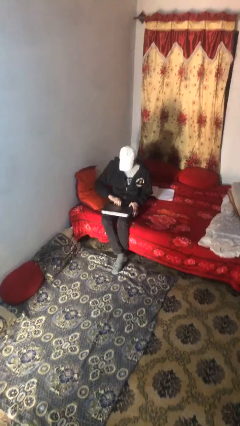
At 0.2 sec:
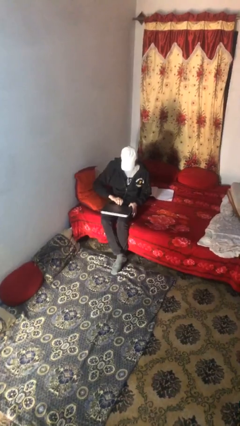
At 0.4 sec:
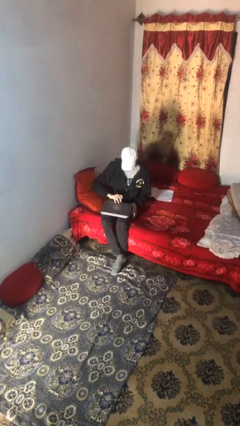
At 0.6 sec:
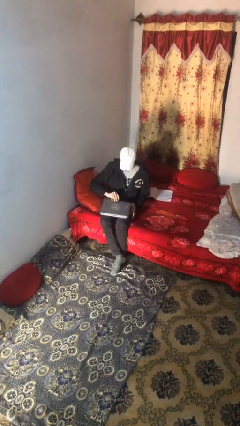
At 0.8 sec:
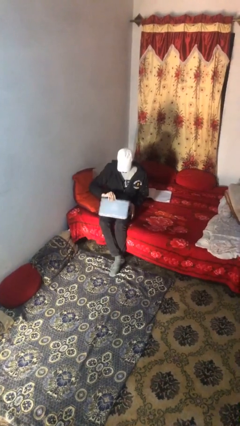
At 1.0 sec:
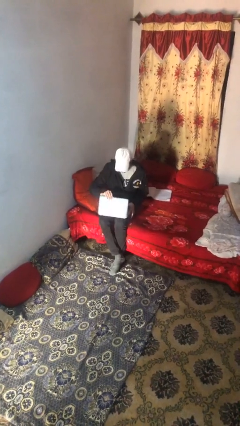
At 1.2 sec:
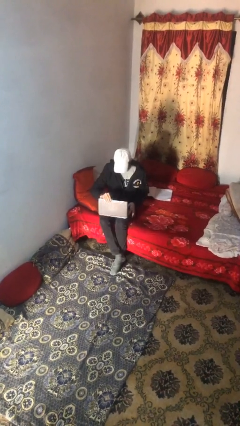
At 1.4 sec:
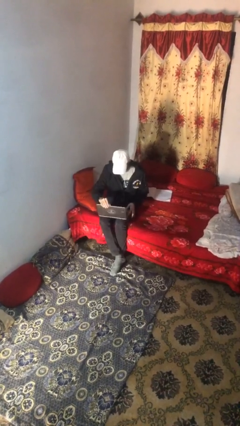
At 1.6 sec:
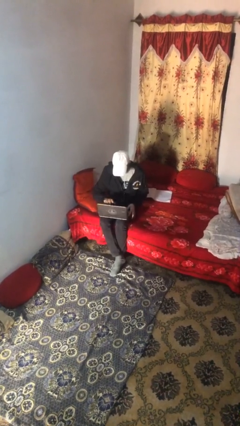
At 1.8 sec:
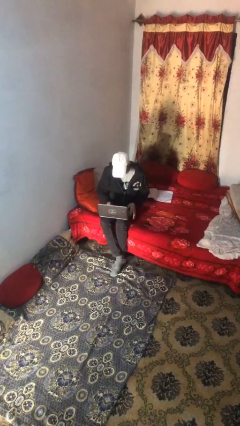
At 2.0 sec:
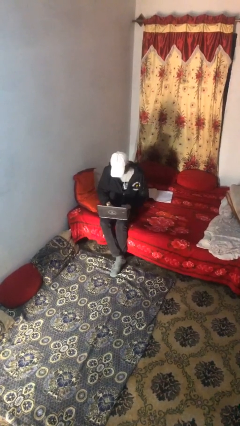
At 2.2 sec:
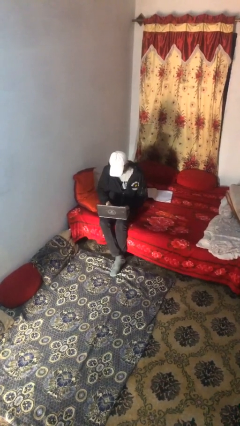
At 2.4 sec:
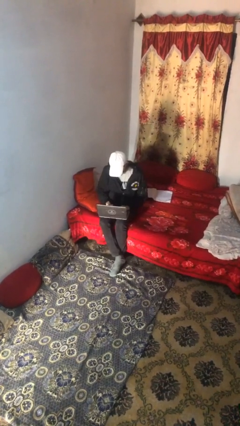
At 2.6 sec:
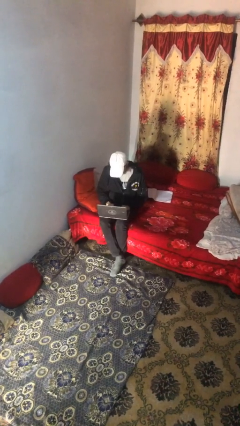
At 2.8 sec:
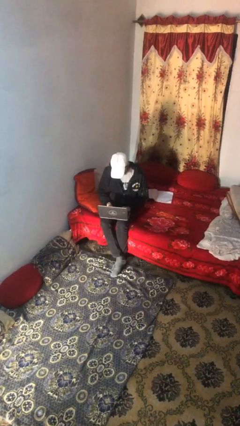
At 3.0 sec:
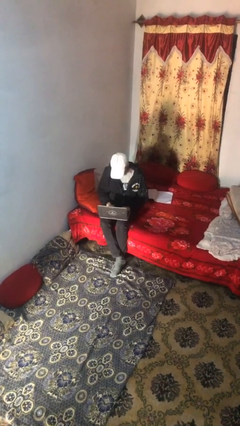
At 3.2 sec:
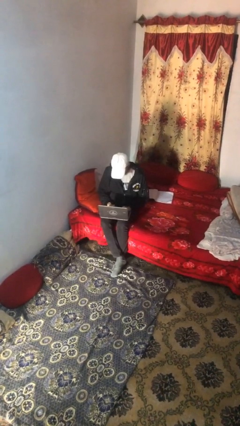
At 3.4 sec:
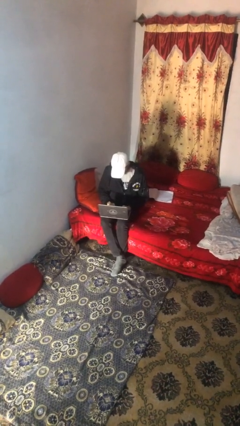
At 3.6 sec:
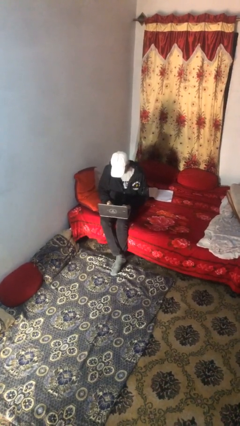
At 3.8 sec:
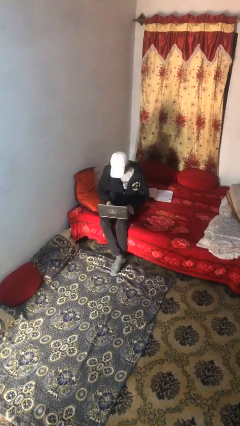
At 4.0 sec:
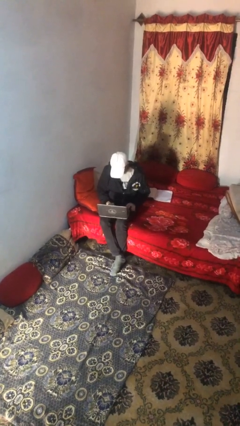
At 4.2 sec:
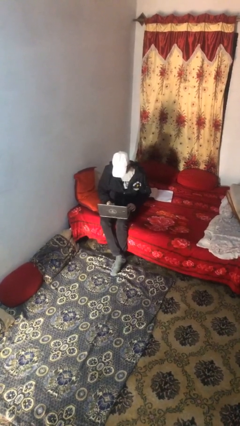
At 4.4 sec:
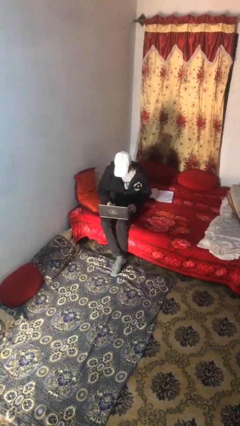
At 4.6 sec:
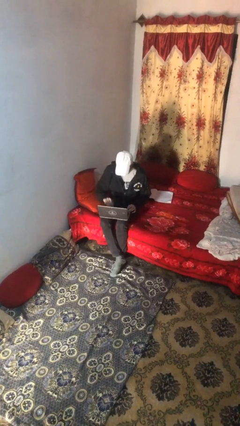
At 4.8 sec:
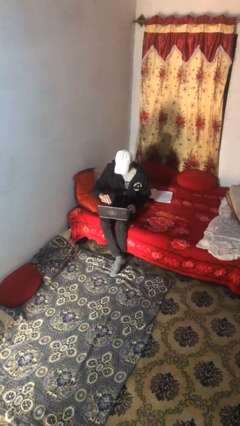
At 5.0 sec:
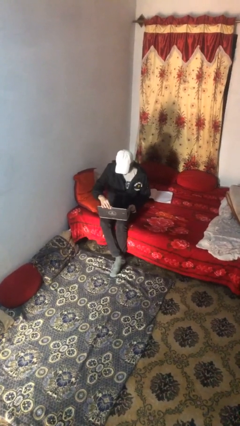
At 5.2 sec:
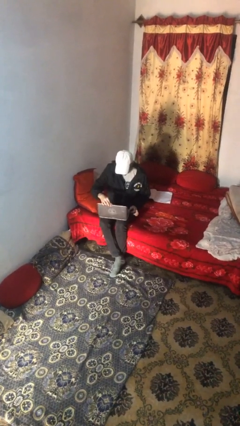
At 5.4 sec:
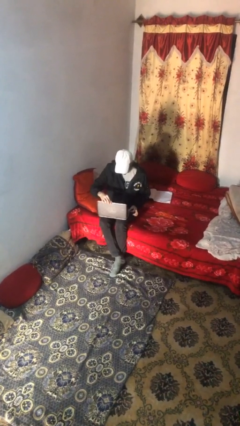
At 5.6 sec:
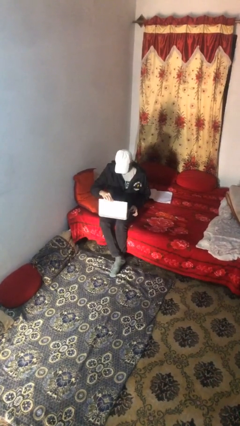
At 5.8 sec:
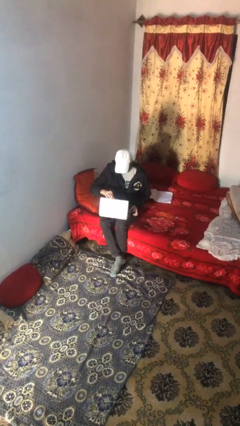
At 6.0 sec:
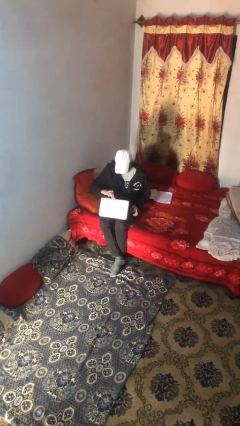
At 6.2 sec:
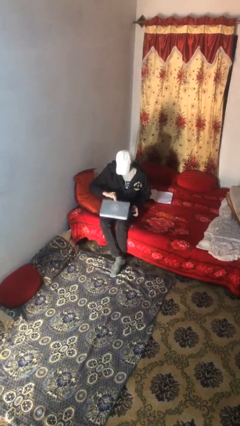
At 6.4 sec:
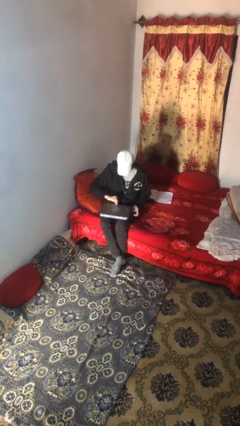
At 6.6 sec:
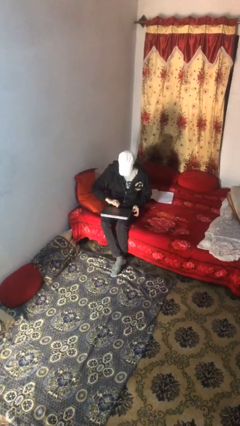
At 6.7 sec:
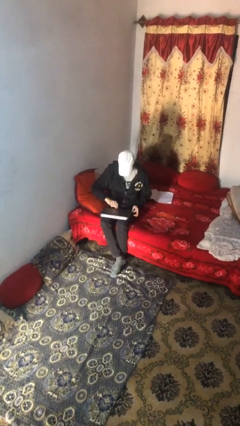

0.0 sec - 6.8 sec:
person interacts with laptop

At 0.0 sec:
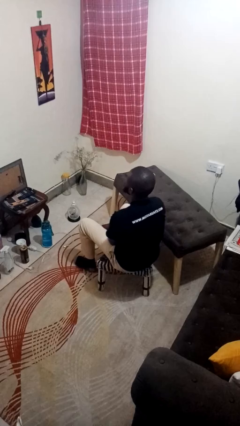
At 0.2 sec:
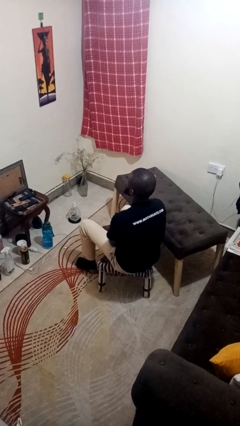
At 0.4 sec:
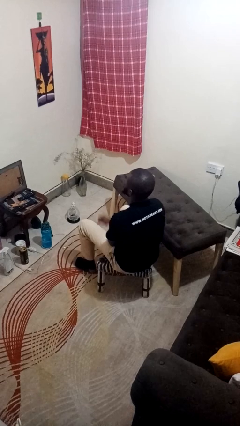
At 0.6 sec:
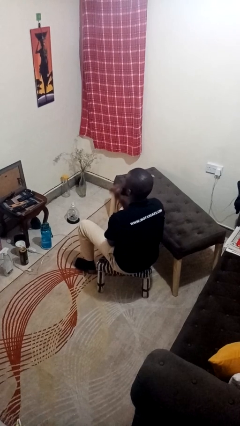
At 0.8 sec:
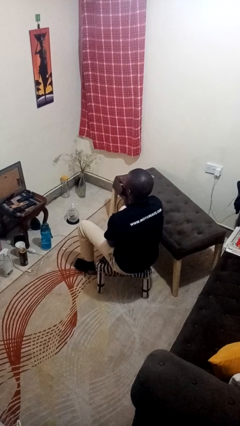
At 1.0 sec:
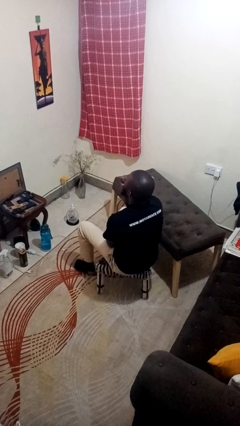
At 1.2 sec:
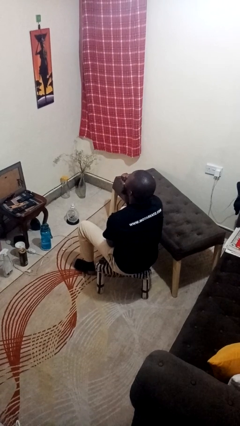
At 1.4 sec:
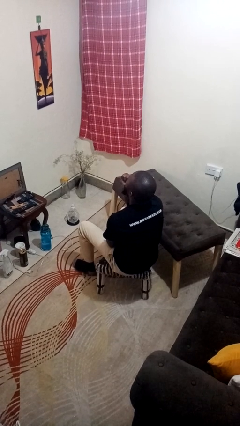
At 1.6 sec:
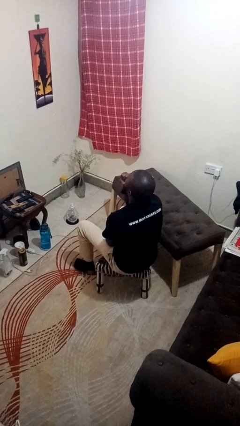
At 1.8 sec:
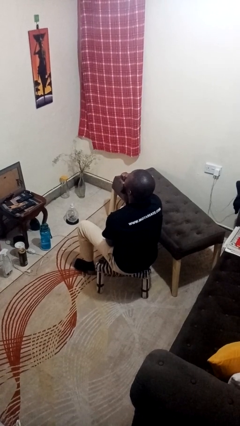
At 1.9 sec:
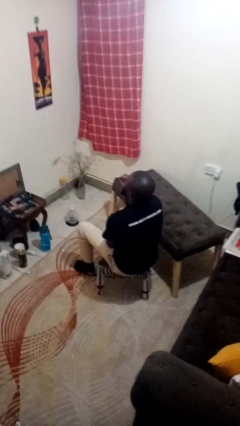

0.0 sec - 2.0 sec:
person yawns

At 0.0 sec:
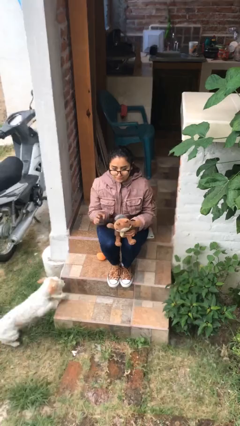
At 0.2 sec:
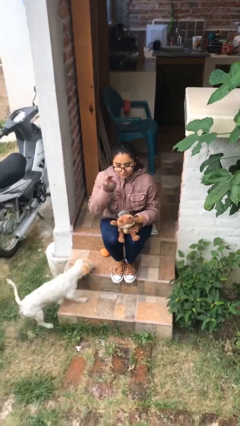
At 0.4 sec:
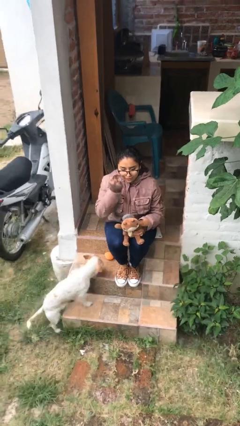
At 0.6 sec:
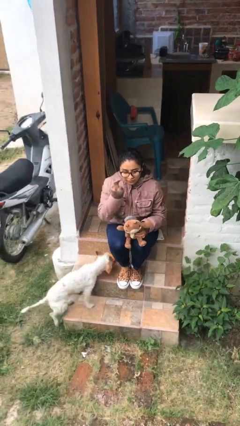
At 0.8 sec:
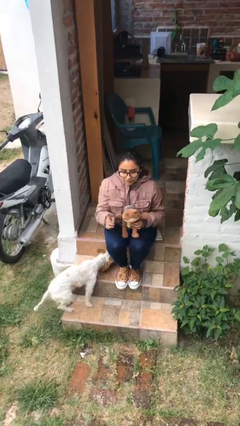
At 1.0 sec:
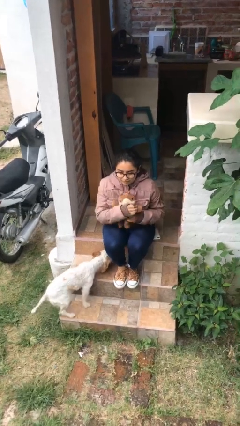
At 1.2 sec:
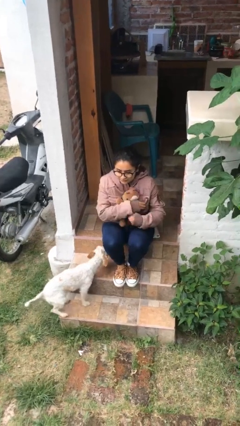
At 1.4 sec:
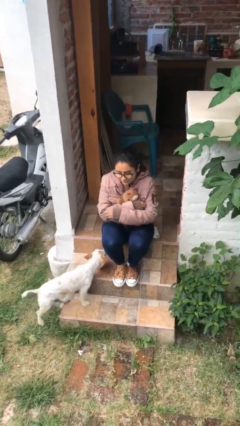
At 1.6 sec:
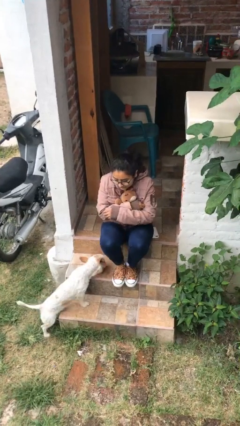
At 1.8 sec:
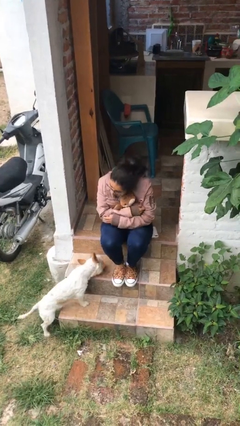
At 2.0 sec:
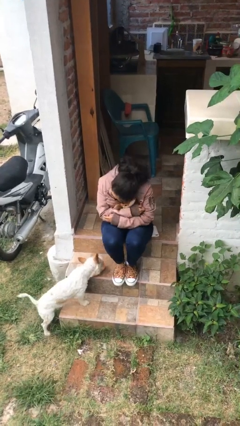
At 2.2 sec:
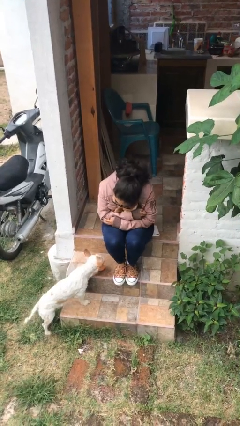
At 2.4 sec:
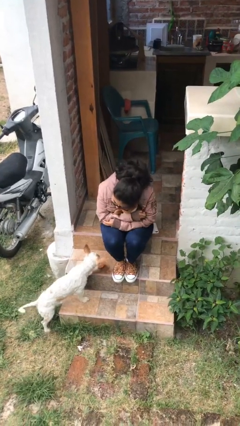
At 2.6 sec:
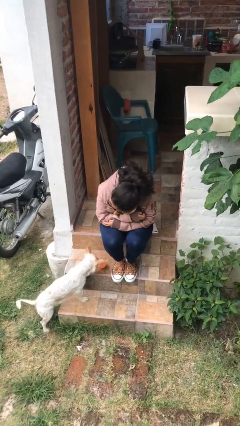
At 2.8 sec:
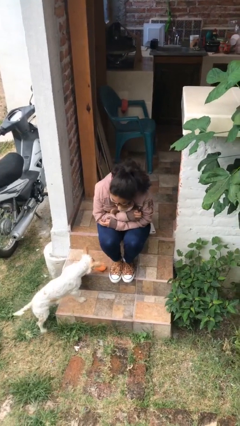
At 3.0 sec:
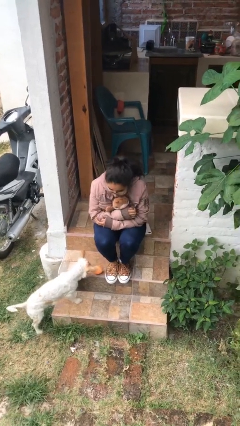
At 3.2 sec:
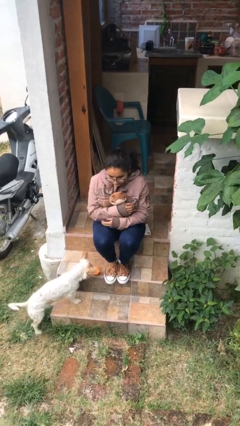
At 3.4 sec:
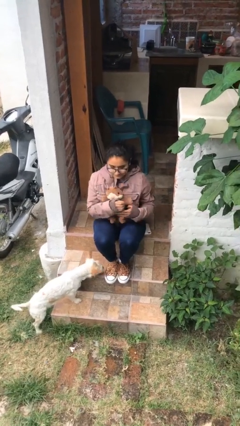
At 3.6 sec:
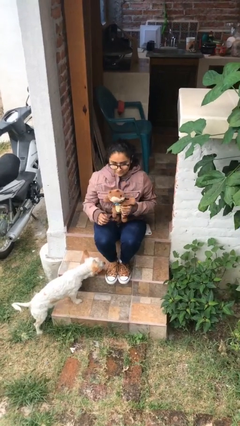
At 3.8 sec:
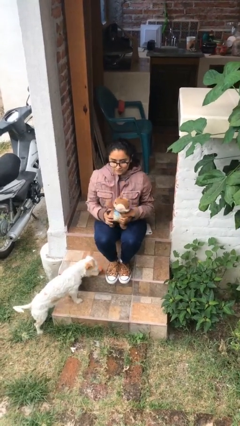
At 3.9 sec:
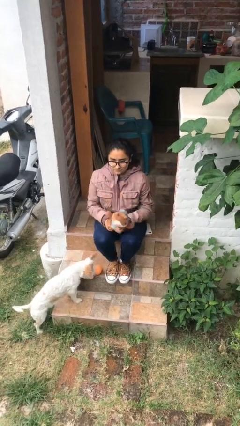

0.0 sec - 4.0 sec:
person hugs stuffed animal

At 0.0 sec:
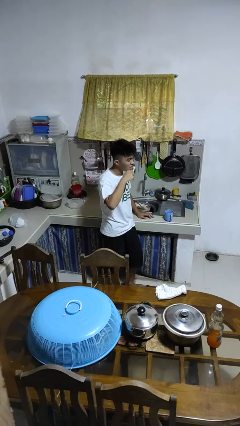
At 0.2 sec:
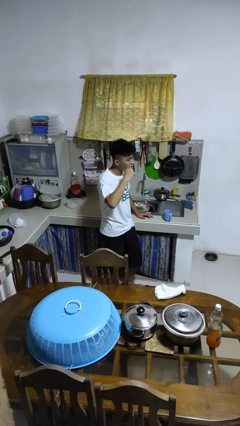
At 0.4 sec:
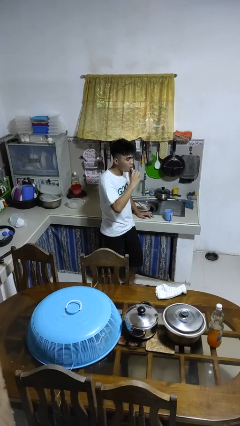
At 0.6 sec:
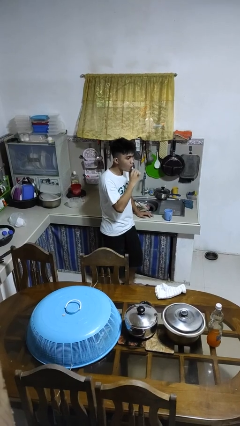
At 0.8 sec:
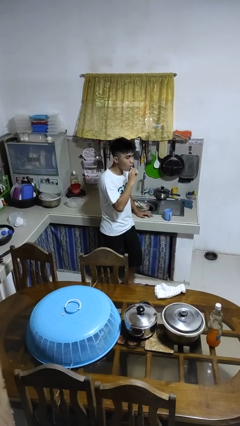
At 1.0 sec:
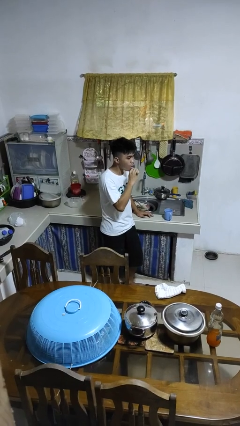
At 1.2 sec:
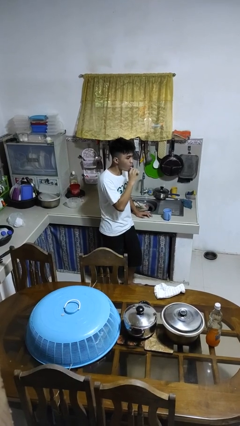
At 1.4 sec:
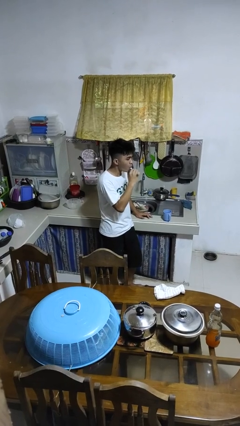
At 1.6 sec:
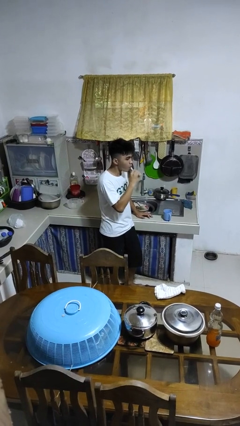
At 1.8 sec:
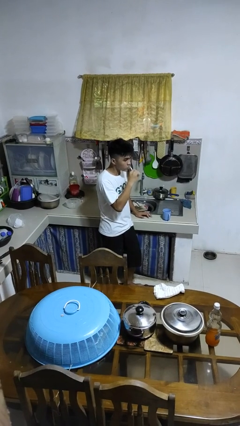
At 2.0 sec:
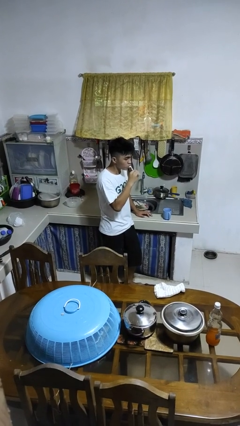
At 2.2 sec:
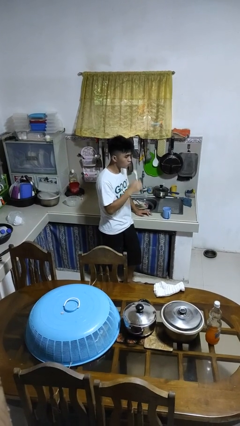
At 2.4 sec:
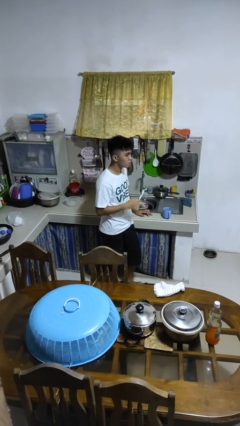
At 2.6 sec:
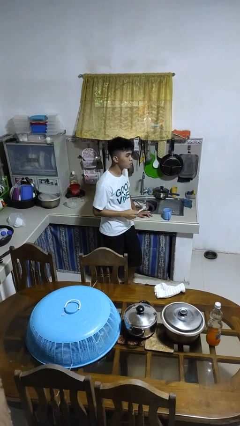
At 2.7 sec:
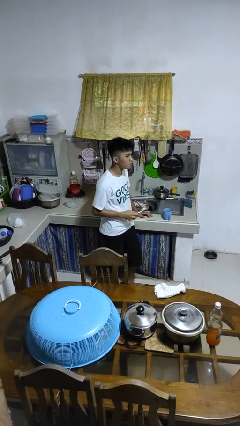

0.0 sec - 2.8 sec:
person brushes teeth

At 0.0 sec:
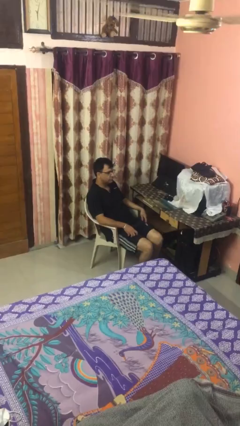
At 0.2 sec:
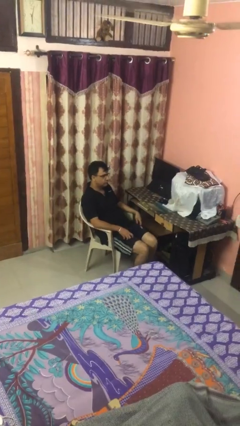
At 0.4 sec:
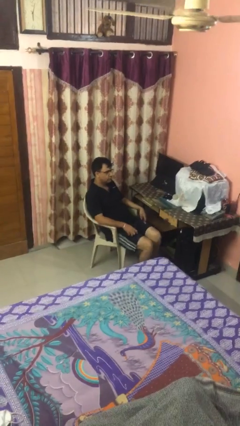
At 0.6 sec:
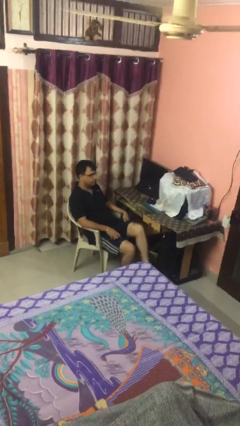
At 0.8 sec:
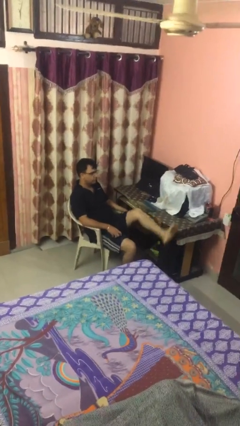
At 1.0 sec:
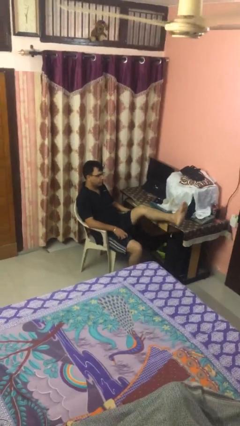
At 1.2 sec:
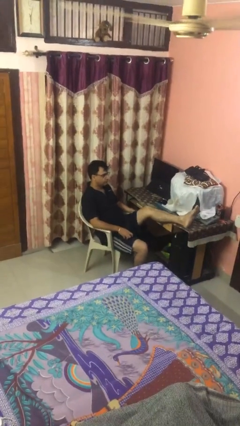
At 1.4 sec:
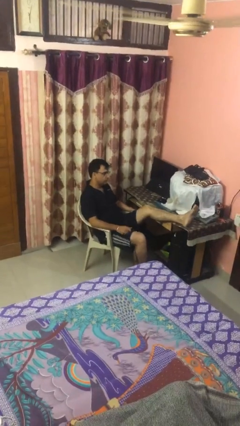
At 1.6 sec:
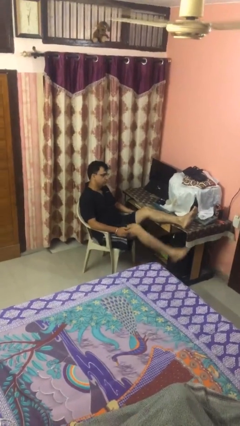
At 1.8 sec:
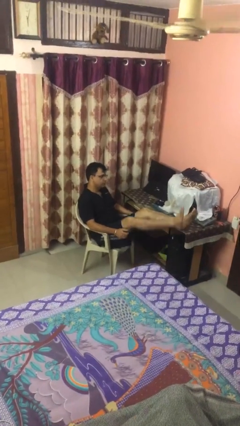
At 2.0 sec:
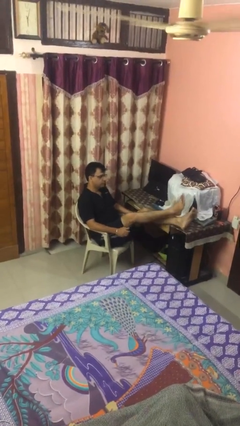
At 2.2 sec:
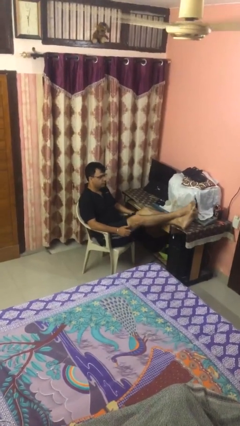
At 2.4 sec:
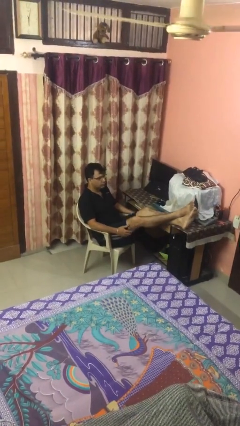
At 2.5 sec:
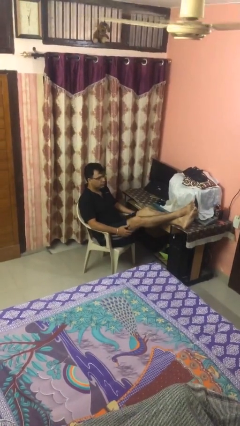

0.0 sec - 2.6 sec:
person puts feet up
